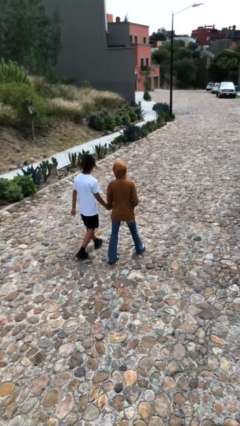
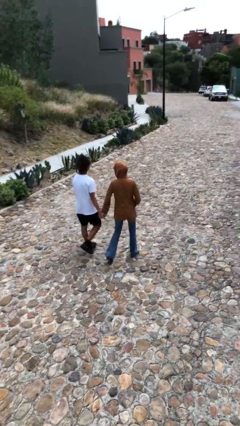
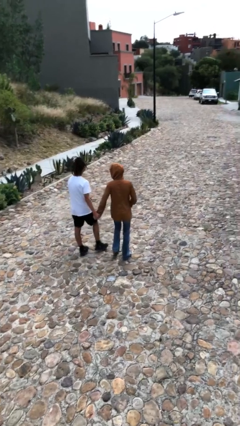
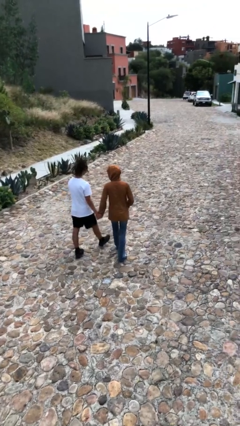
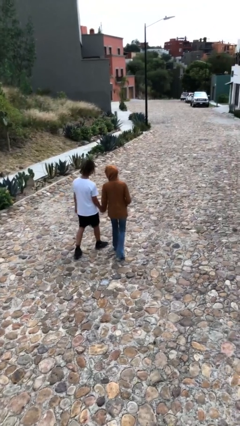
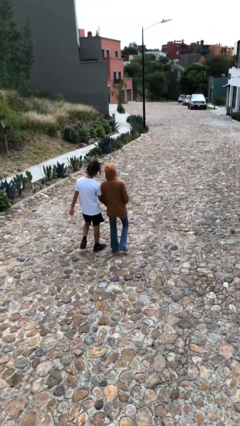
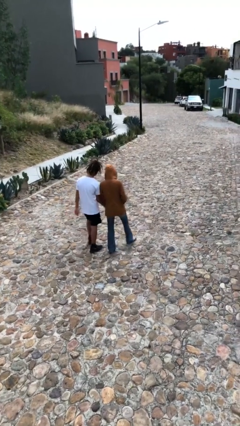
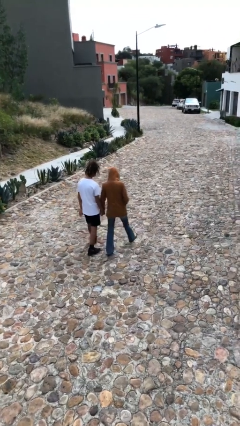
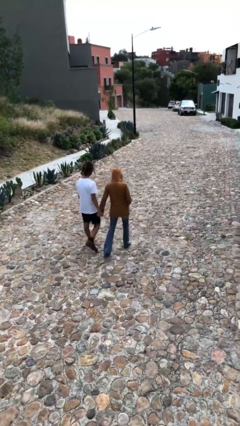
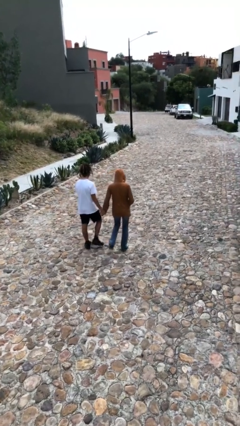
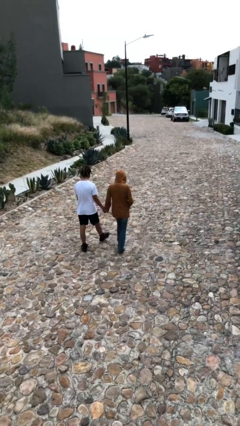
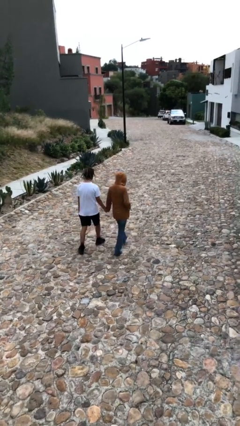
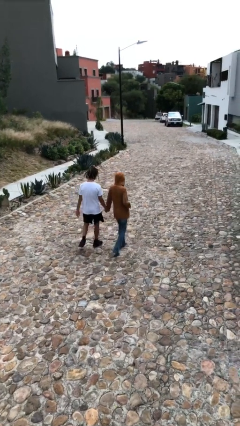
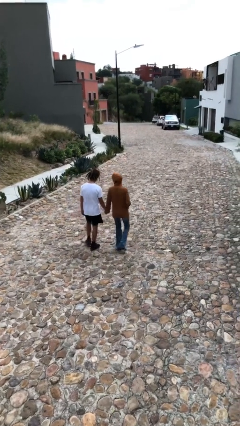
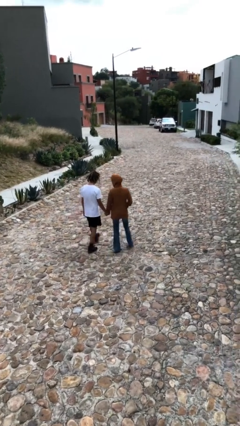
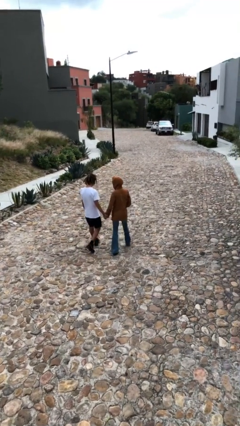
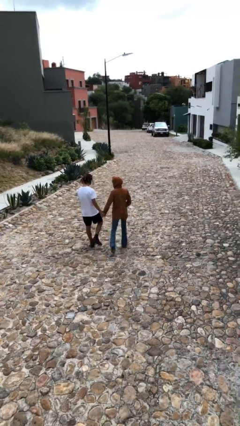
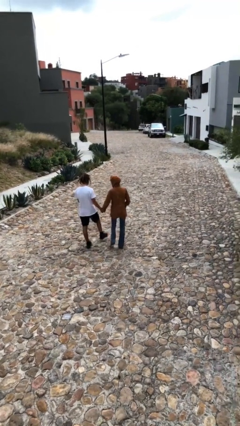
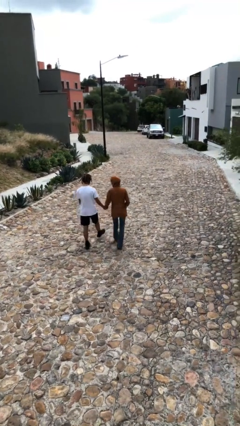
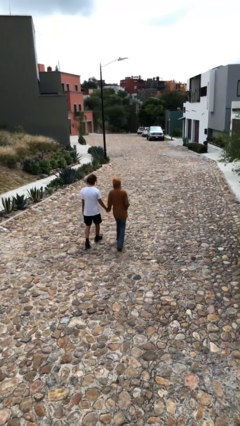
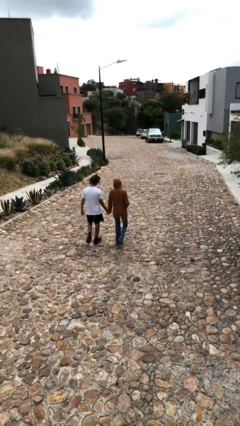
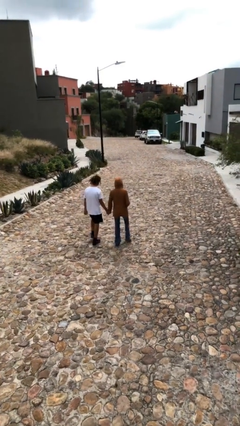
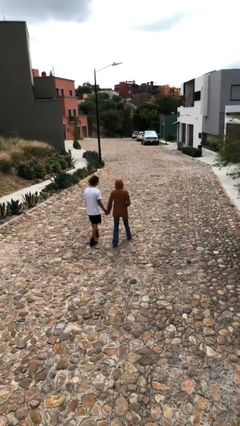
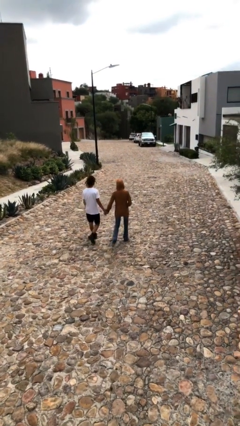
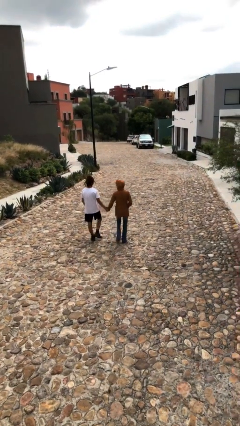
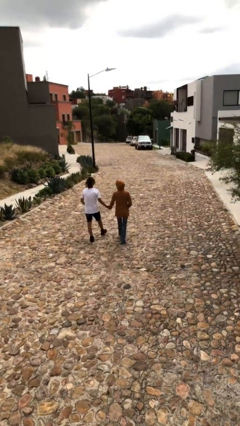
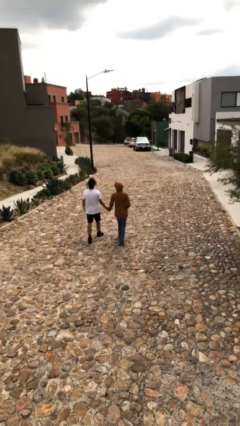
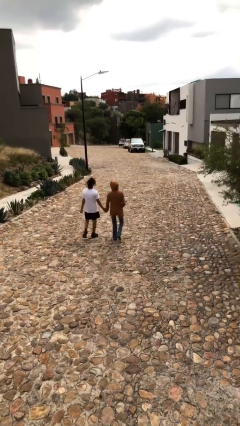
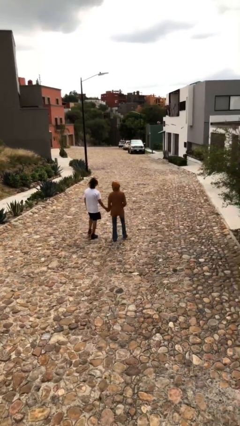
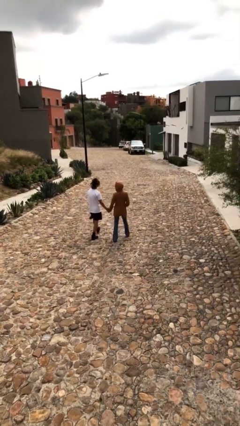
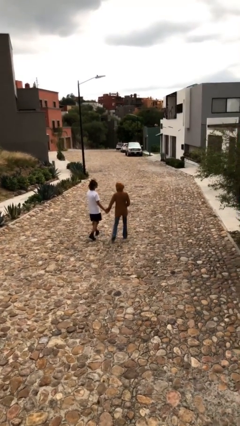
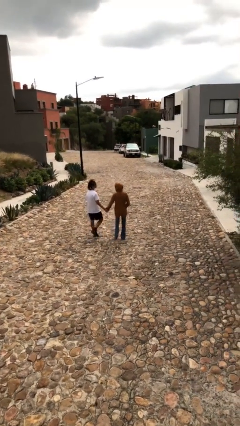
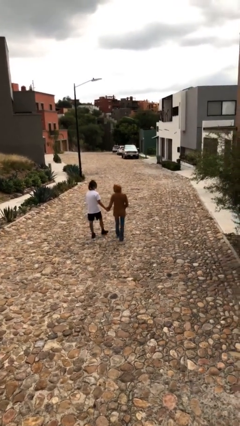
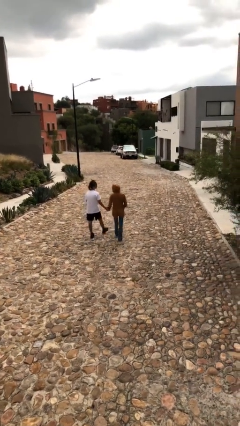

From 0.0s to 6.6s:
person holds hand

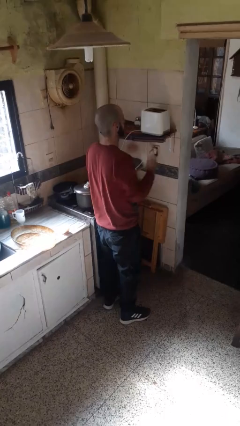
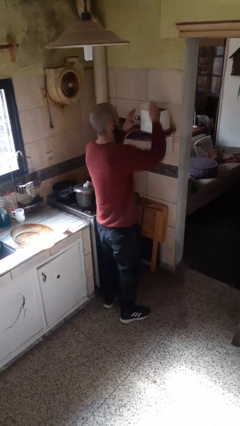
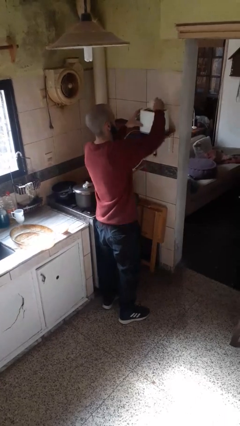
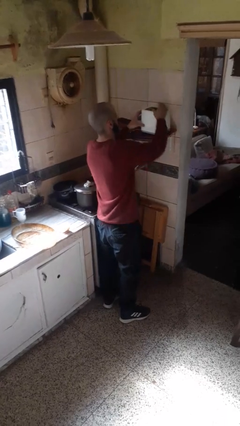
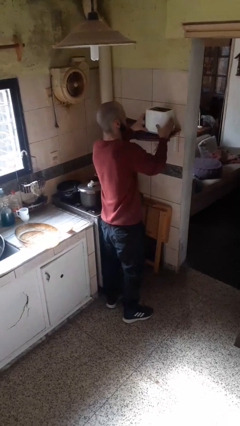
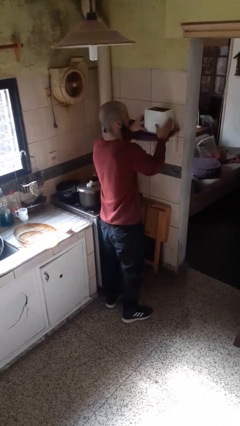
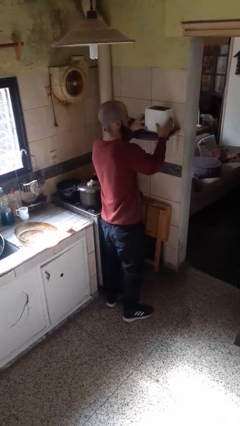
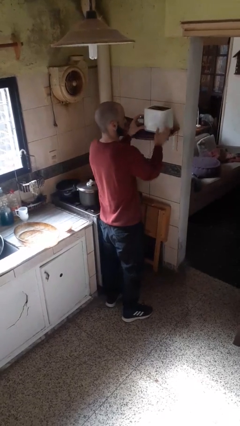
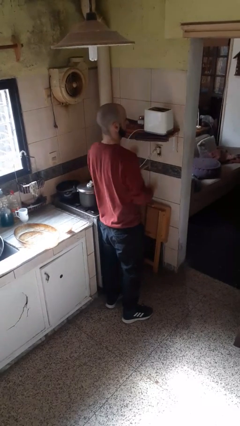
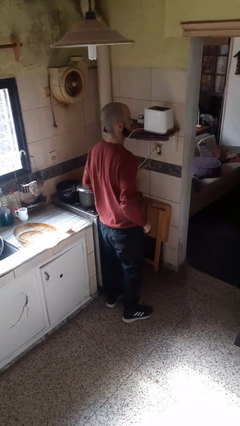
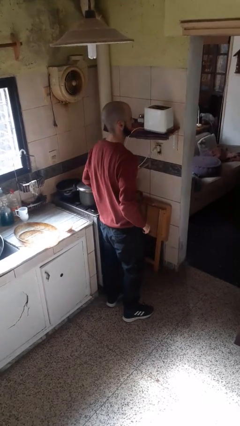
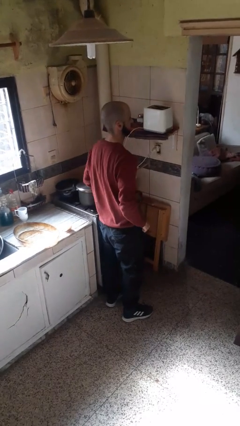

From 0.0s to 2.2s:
person puts object into toaster

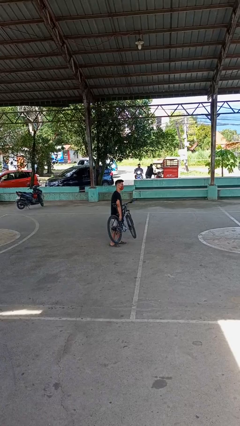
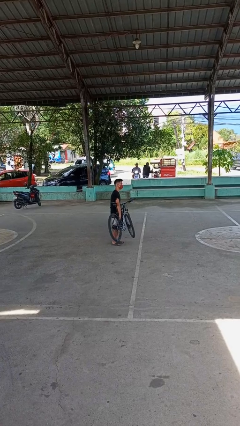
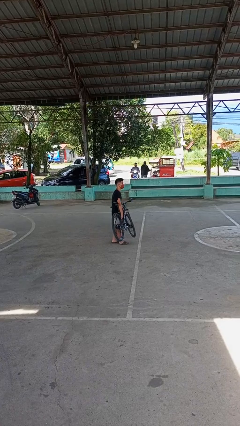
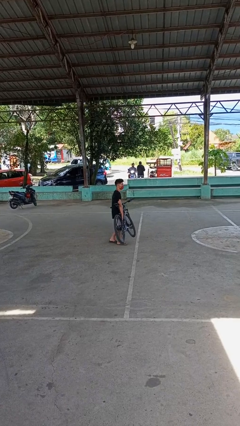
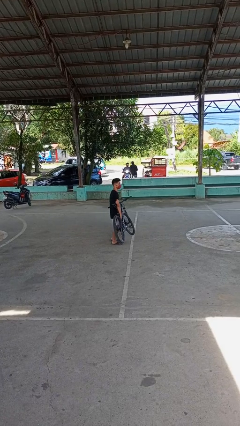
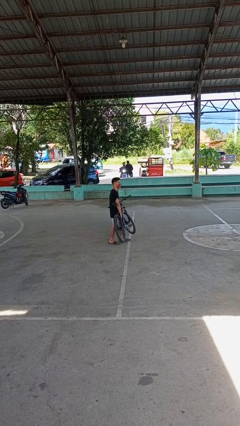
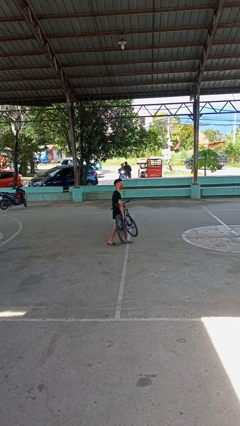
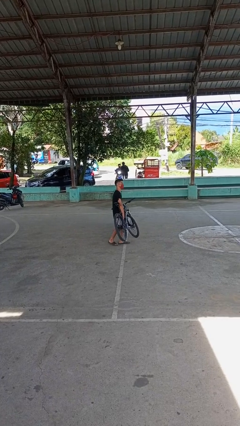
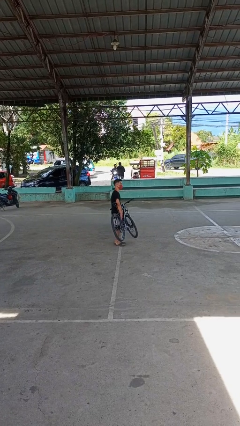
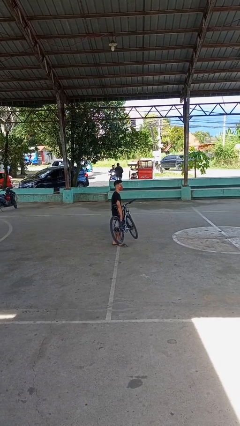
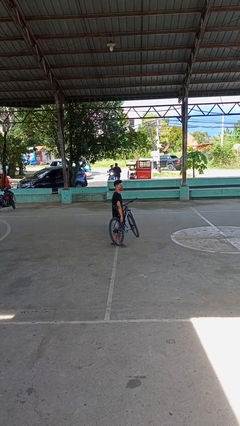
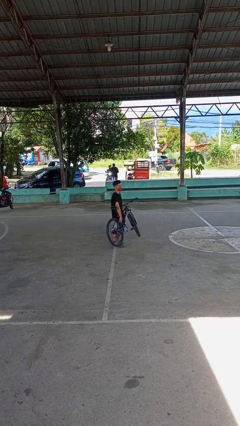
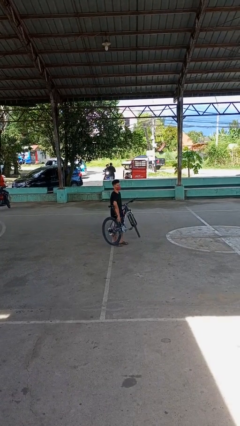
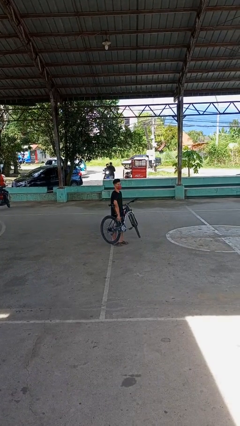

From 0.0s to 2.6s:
person carries bicycle

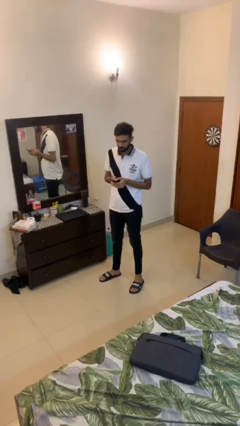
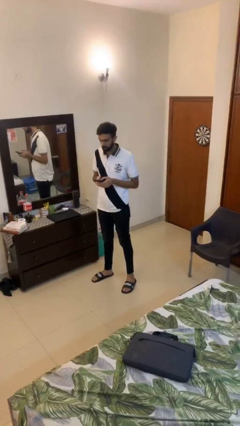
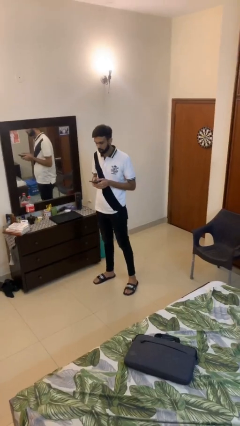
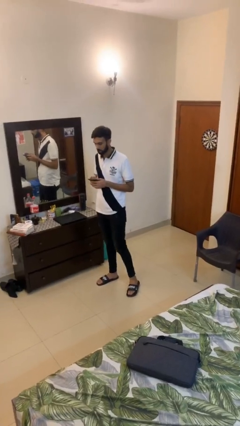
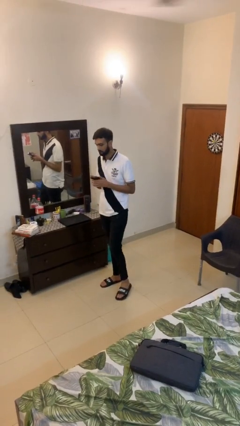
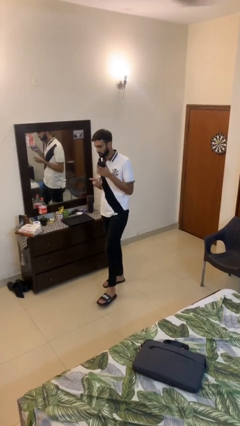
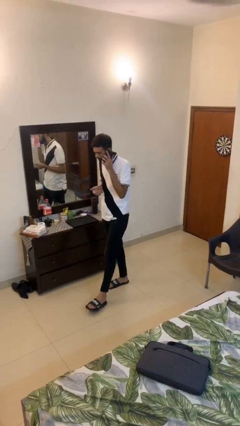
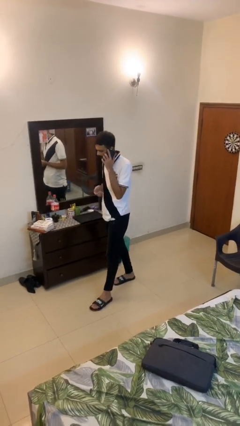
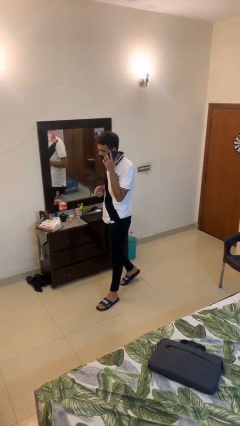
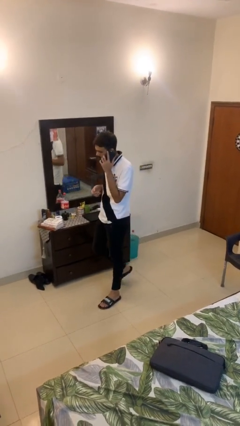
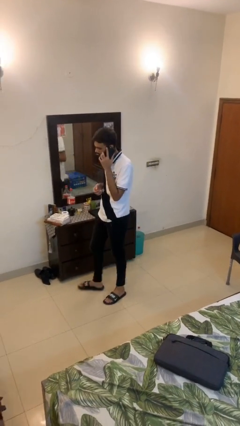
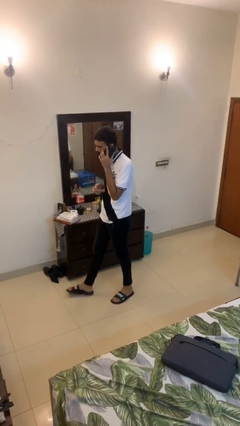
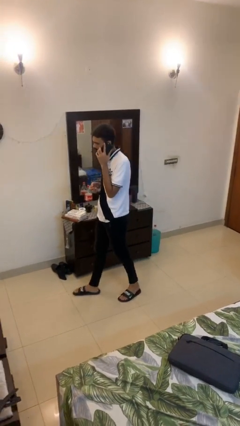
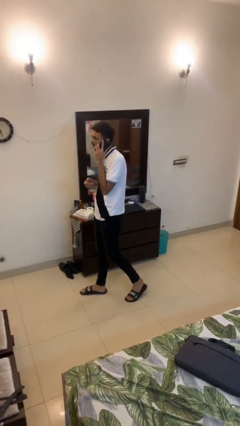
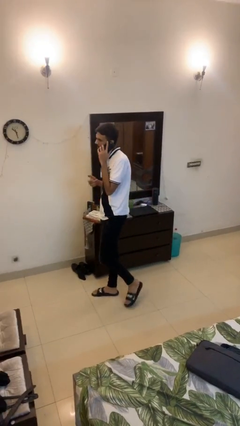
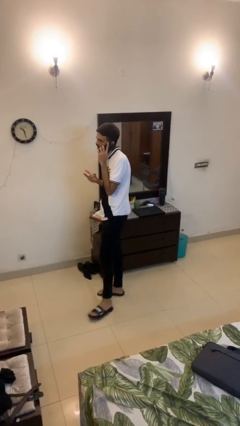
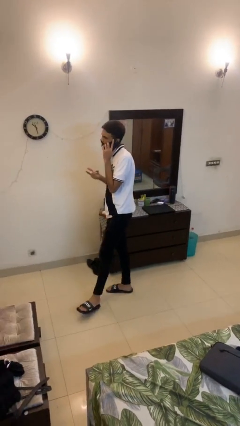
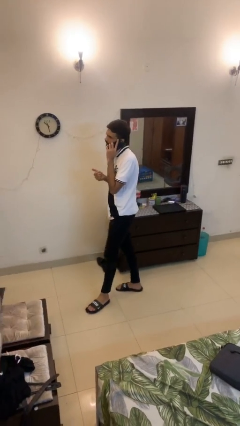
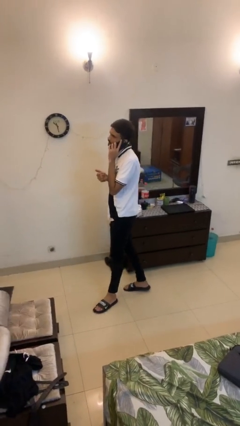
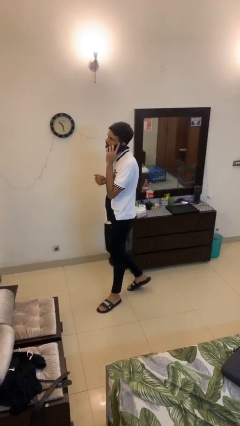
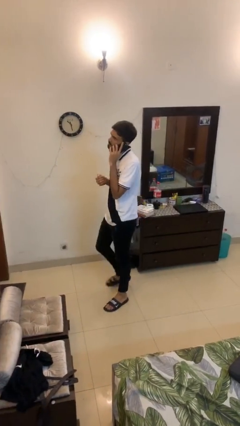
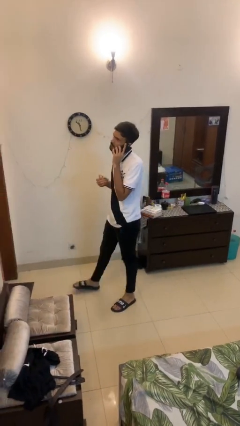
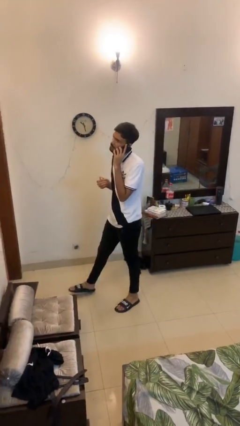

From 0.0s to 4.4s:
person talks on phone

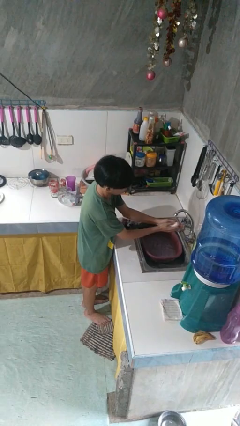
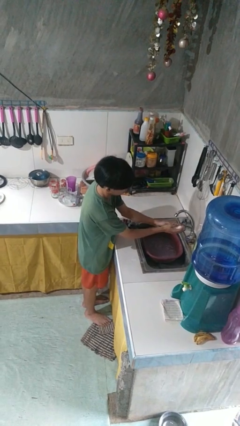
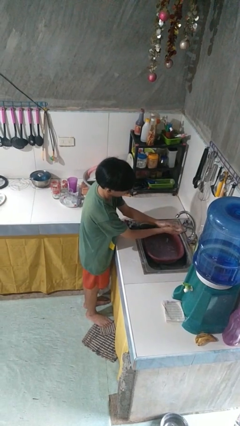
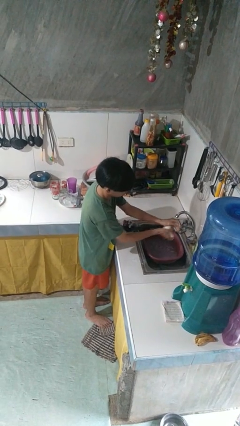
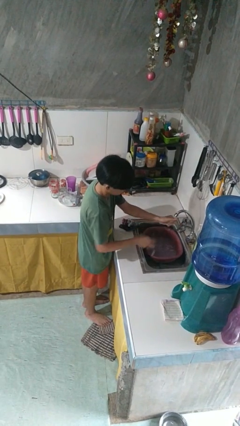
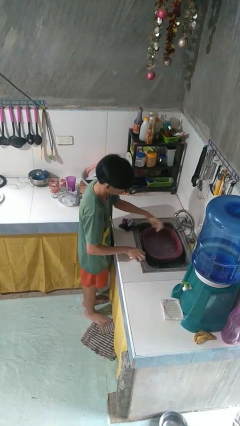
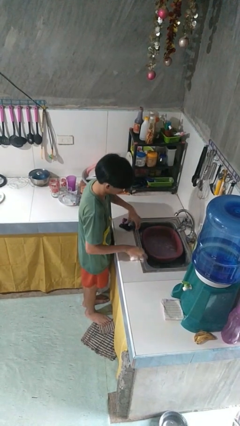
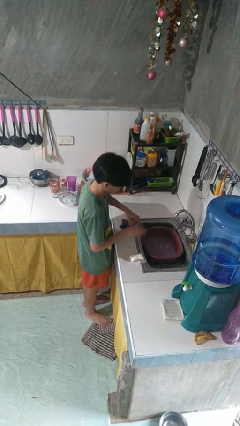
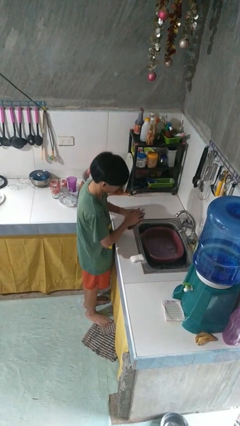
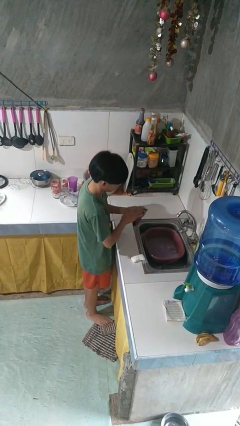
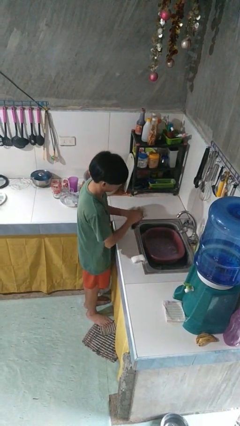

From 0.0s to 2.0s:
person dries hands with towel
